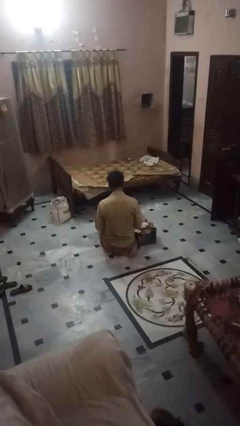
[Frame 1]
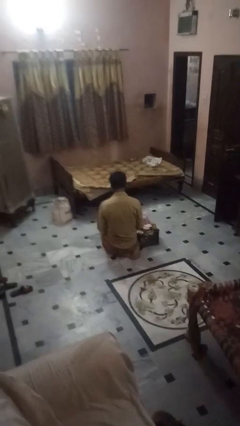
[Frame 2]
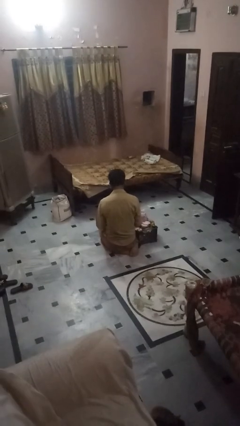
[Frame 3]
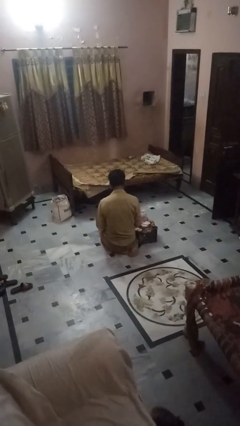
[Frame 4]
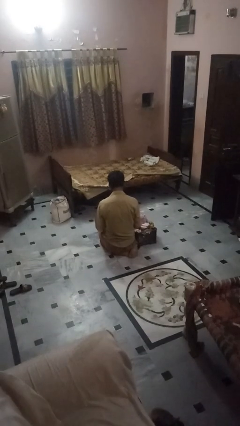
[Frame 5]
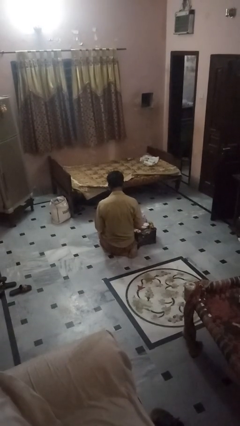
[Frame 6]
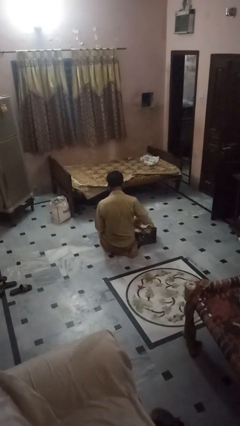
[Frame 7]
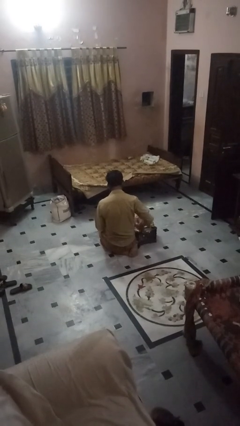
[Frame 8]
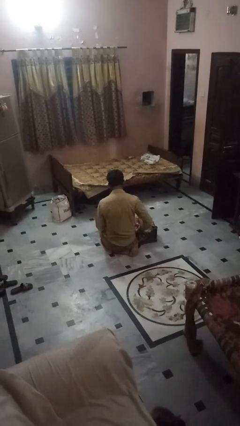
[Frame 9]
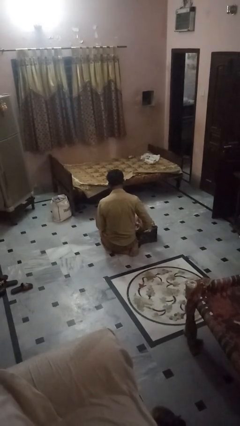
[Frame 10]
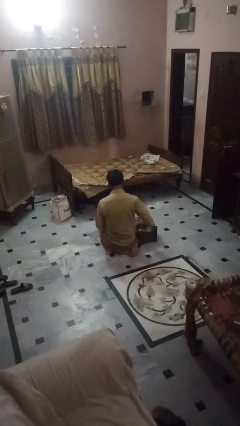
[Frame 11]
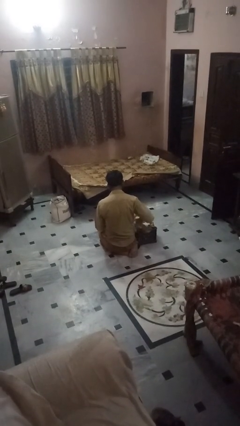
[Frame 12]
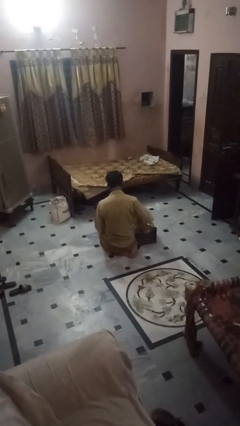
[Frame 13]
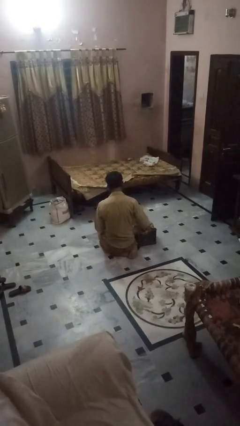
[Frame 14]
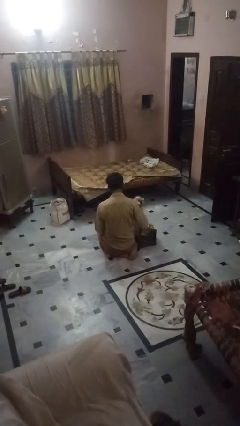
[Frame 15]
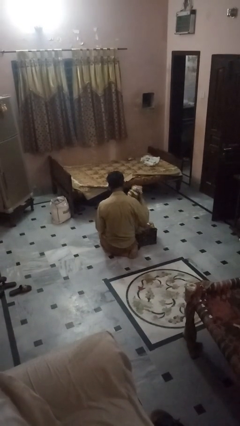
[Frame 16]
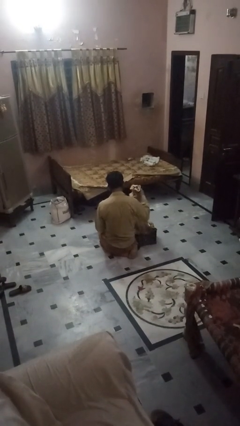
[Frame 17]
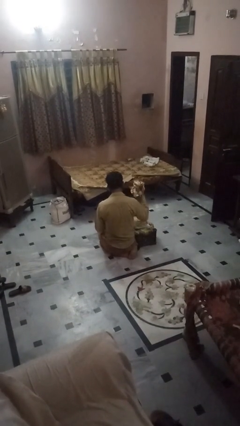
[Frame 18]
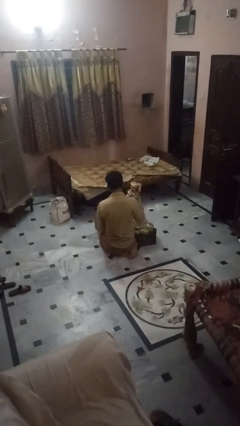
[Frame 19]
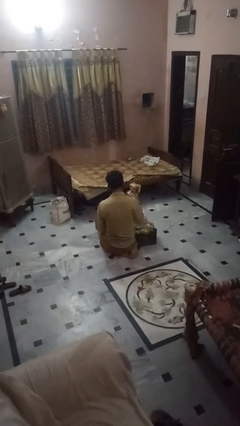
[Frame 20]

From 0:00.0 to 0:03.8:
person takes object from bag

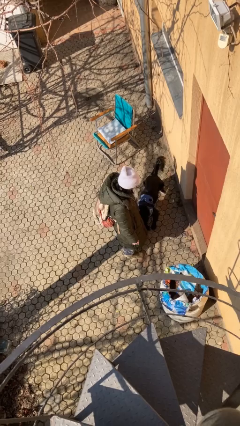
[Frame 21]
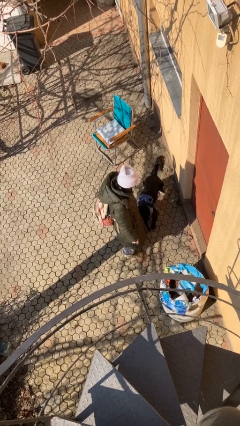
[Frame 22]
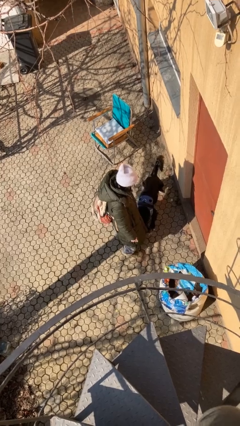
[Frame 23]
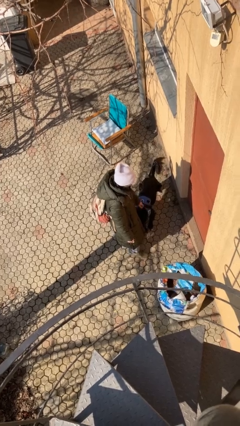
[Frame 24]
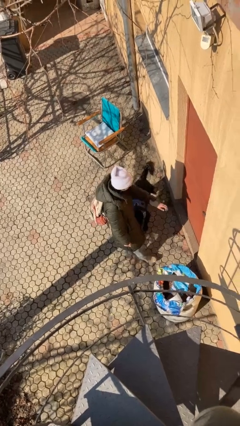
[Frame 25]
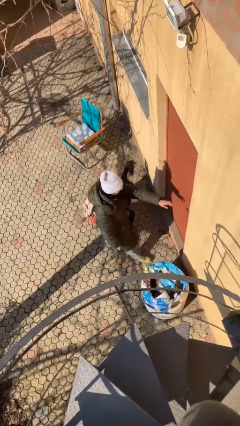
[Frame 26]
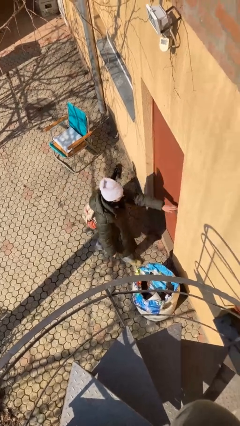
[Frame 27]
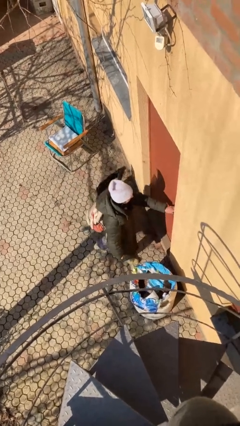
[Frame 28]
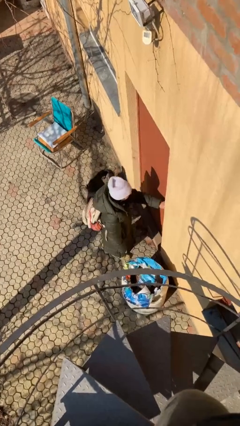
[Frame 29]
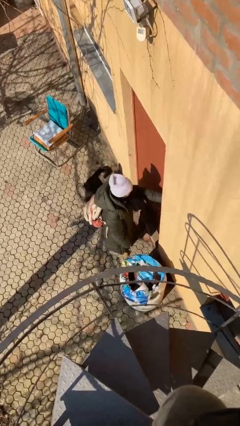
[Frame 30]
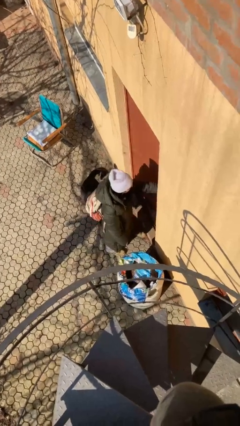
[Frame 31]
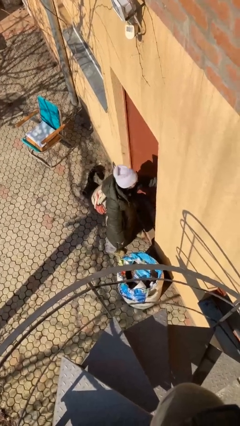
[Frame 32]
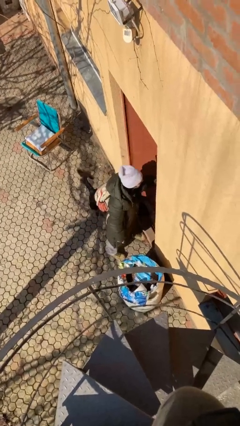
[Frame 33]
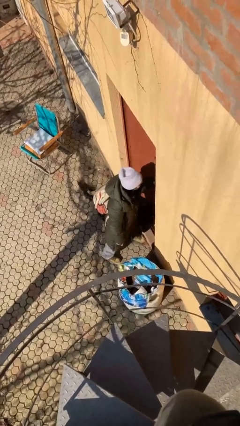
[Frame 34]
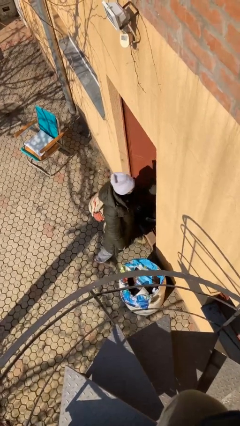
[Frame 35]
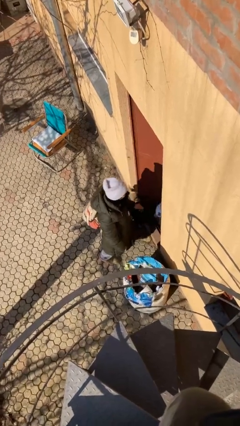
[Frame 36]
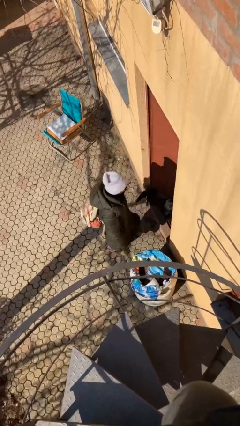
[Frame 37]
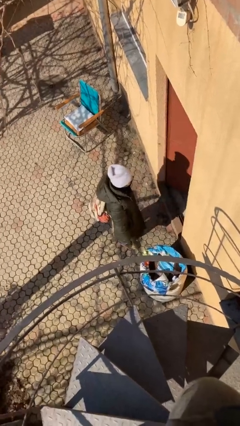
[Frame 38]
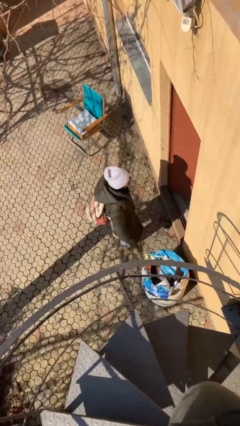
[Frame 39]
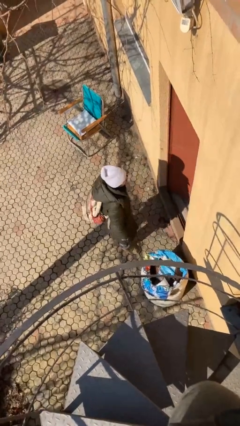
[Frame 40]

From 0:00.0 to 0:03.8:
person opens facility door

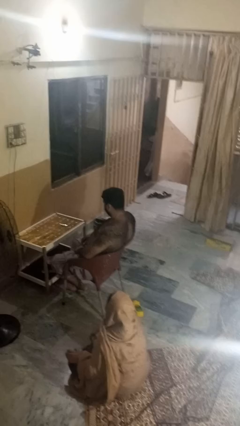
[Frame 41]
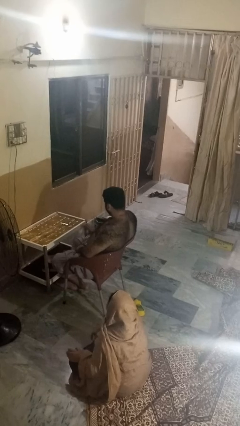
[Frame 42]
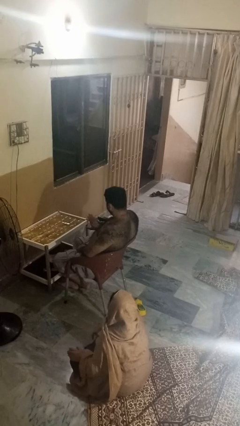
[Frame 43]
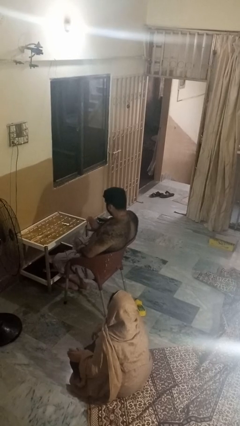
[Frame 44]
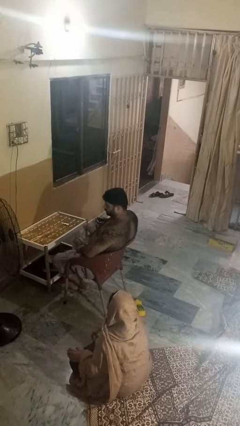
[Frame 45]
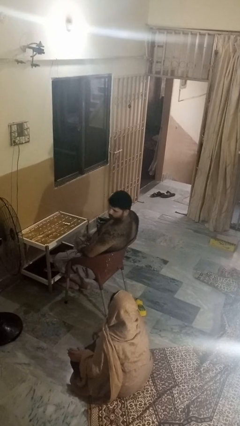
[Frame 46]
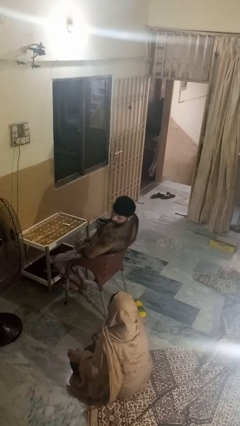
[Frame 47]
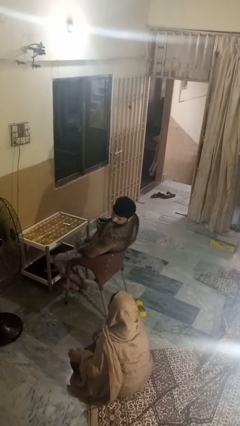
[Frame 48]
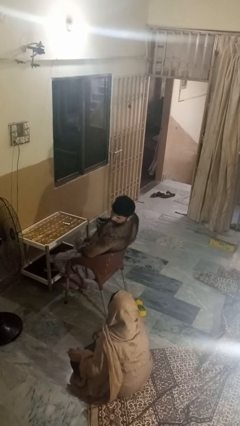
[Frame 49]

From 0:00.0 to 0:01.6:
person looks over shoulder

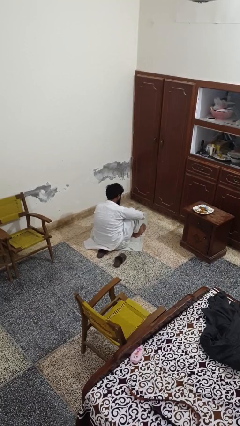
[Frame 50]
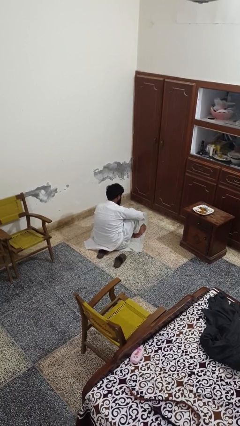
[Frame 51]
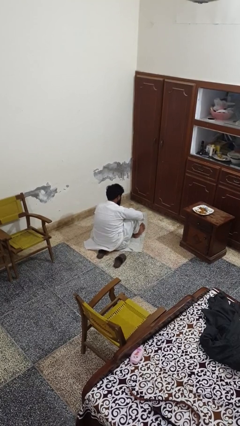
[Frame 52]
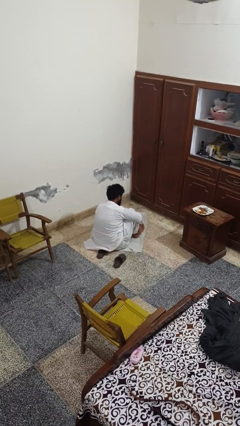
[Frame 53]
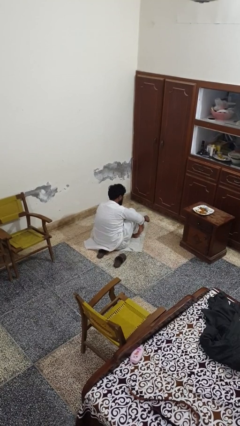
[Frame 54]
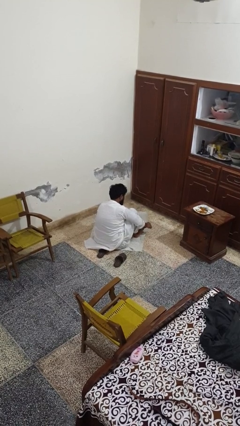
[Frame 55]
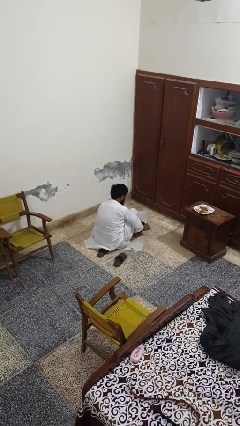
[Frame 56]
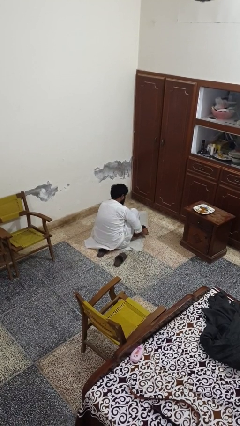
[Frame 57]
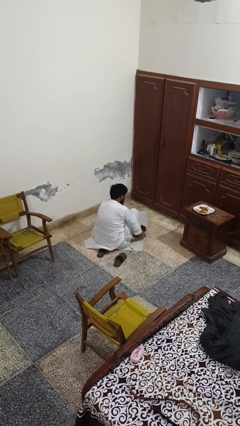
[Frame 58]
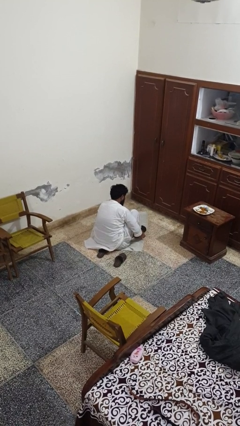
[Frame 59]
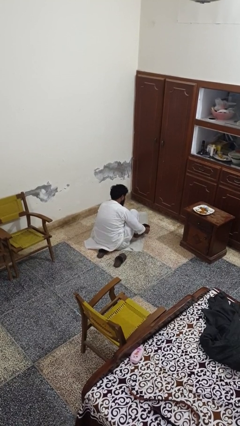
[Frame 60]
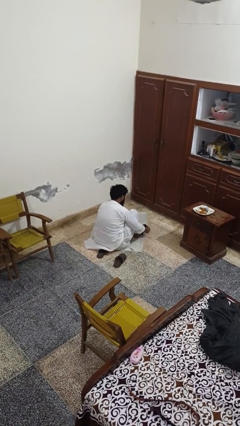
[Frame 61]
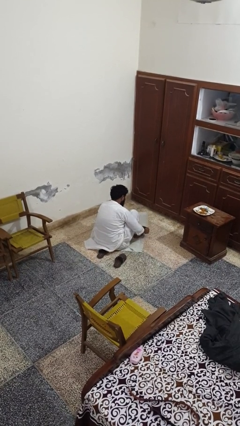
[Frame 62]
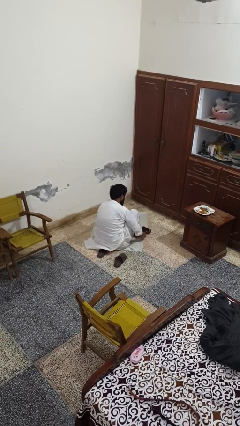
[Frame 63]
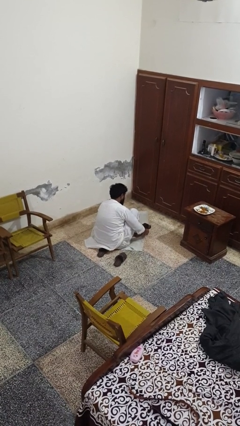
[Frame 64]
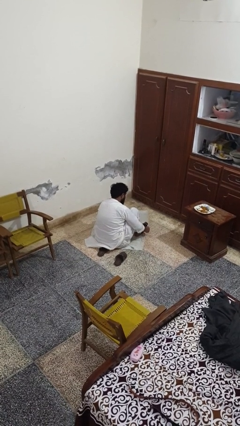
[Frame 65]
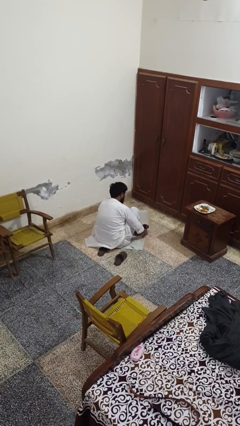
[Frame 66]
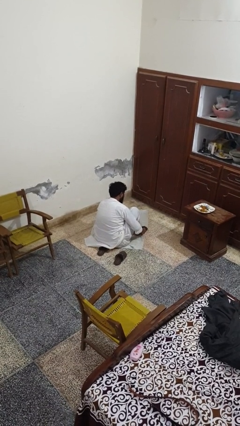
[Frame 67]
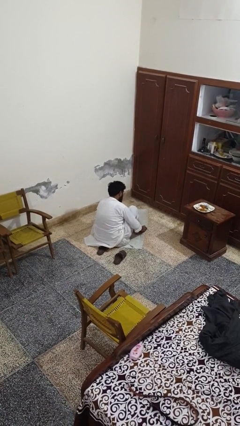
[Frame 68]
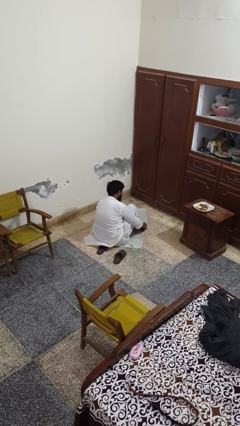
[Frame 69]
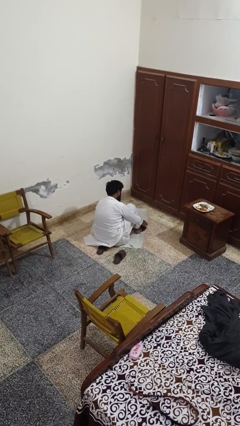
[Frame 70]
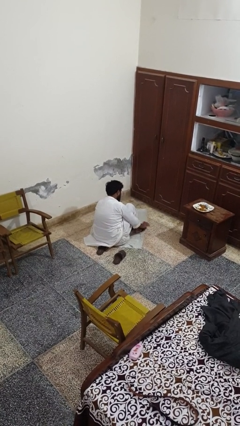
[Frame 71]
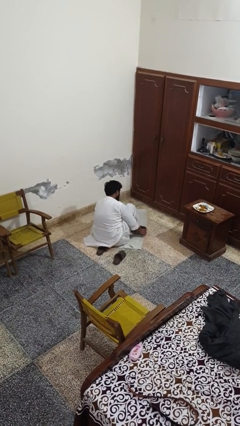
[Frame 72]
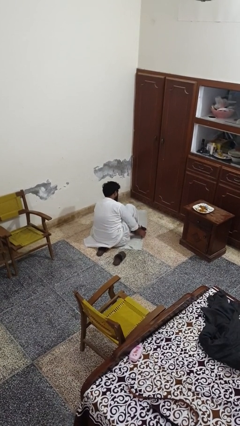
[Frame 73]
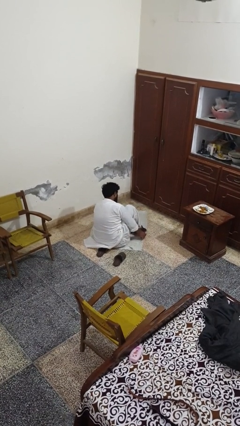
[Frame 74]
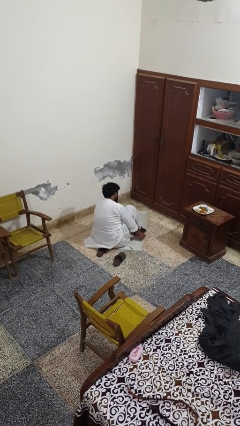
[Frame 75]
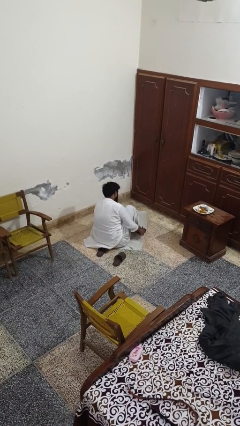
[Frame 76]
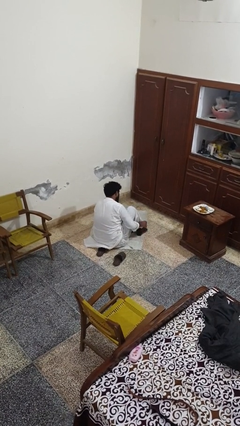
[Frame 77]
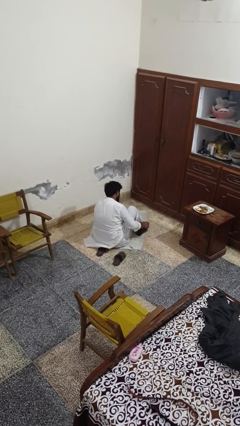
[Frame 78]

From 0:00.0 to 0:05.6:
person puts on socks

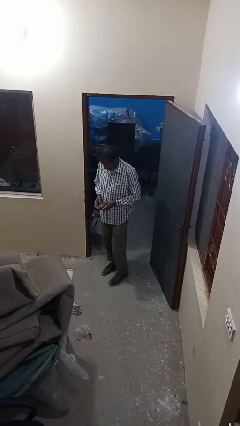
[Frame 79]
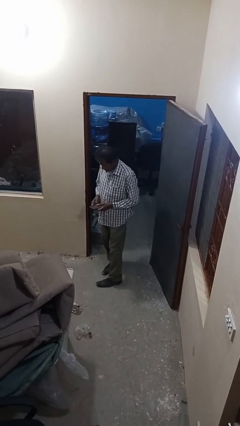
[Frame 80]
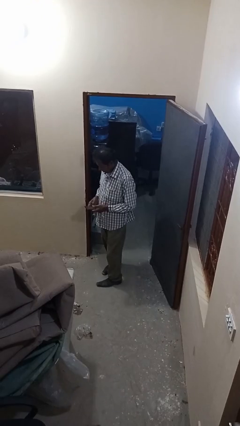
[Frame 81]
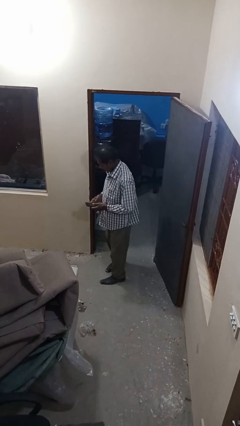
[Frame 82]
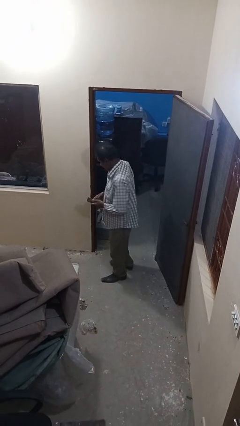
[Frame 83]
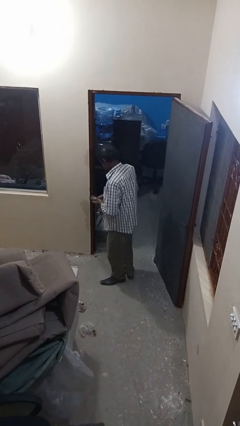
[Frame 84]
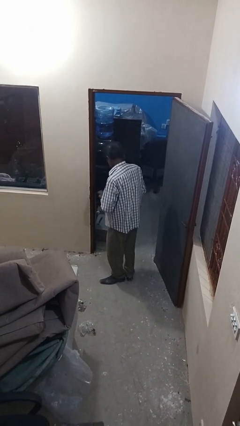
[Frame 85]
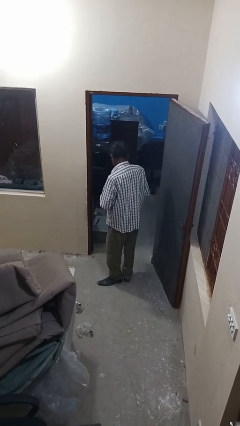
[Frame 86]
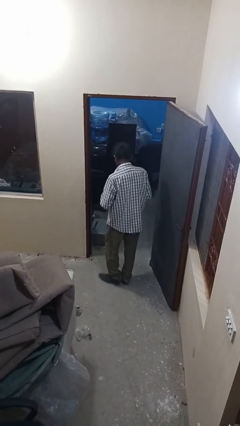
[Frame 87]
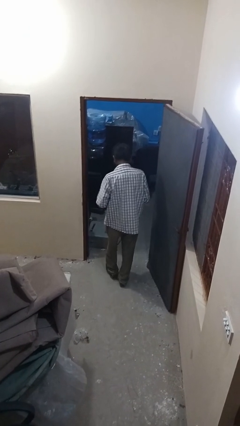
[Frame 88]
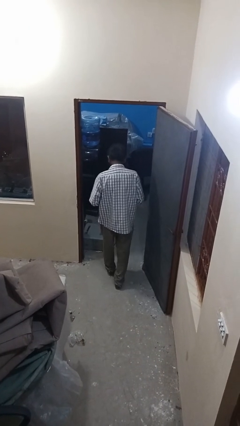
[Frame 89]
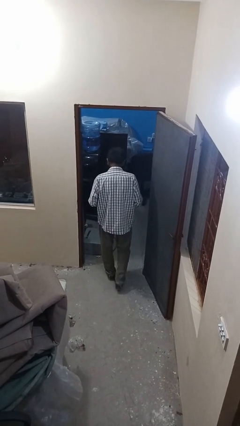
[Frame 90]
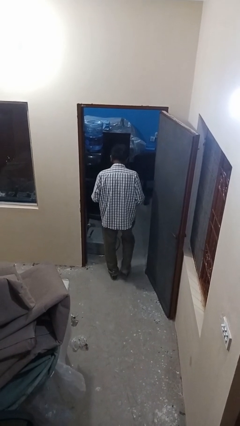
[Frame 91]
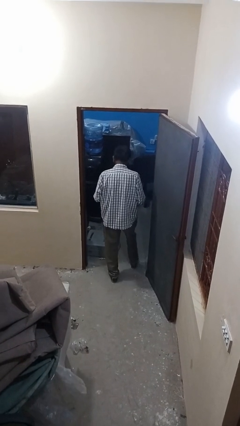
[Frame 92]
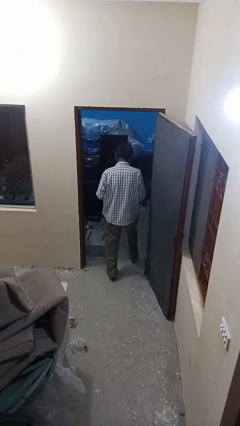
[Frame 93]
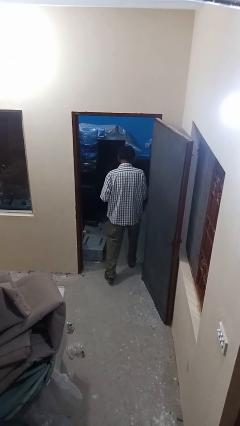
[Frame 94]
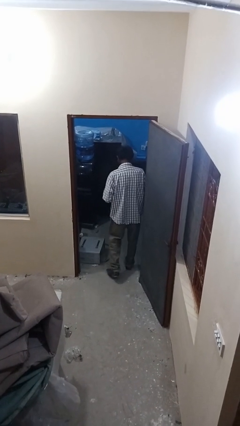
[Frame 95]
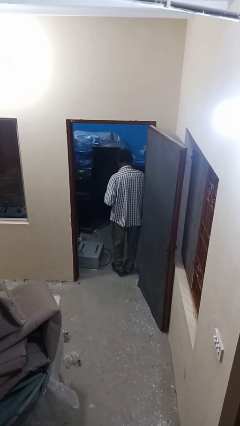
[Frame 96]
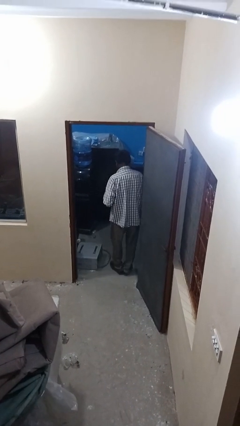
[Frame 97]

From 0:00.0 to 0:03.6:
person exits scene through structure
